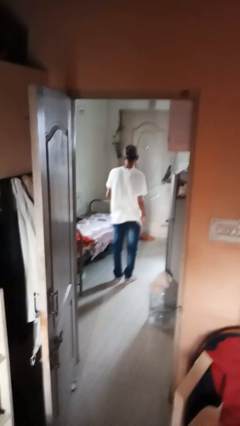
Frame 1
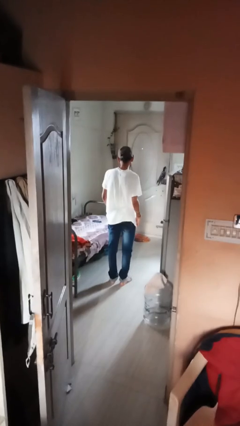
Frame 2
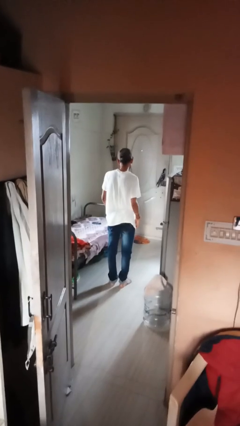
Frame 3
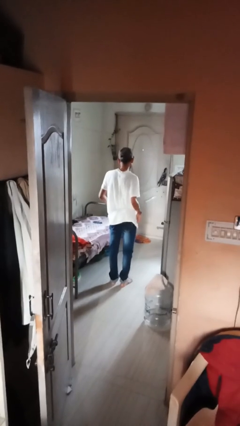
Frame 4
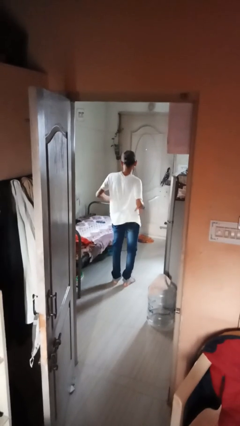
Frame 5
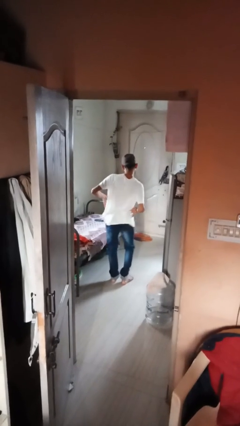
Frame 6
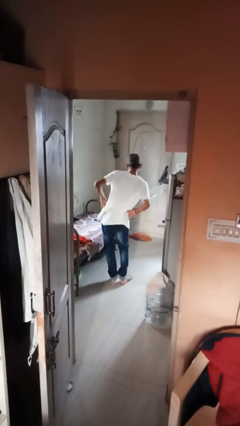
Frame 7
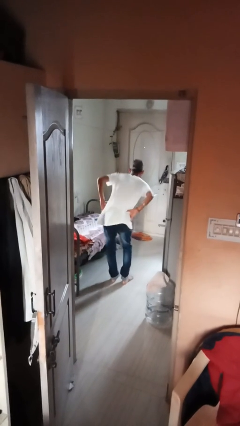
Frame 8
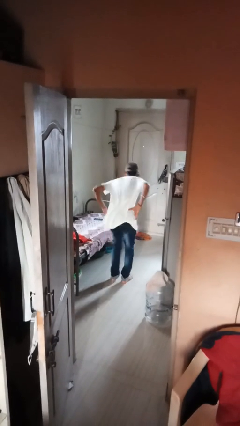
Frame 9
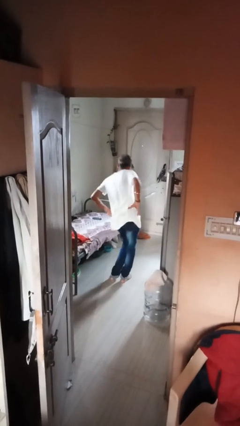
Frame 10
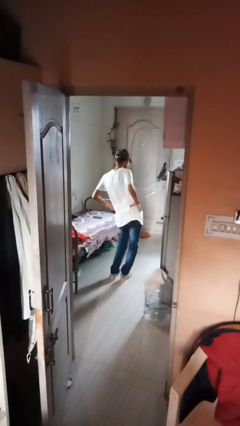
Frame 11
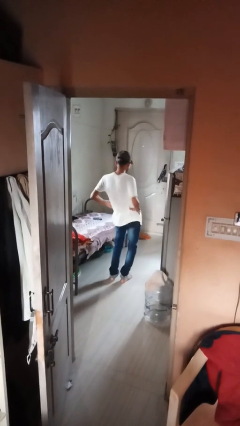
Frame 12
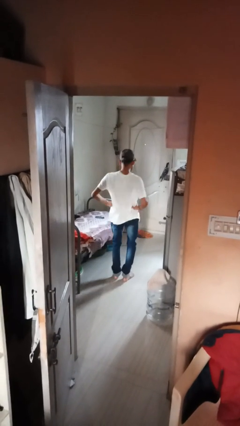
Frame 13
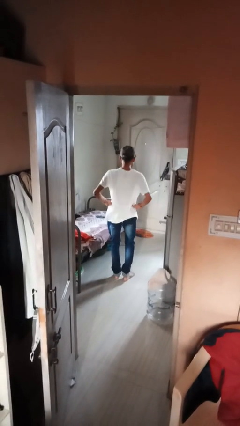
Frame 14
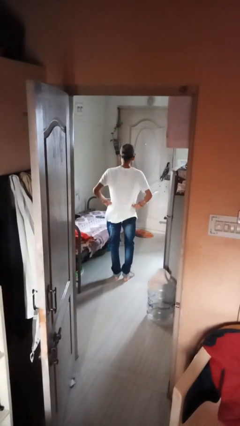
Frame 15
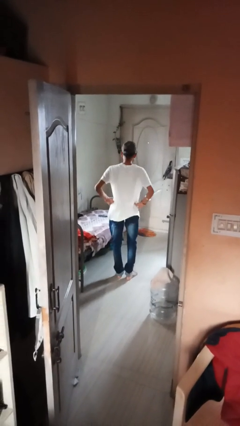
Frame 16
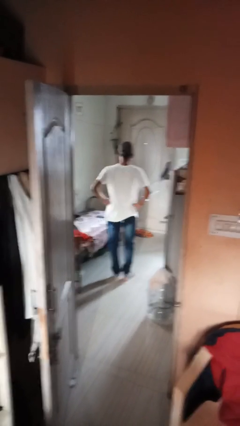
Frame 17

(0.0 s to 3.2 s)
person wiggles hips

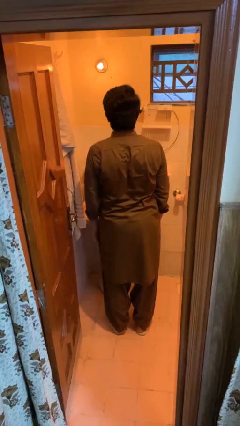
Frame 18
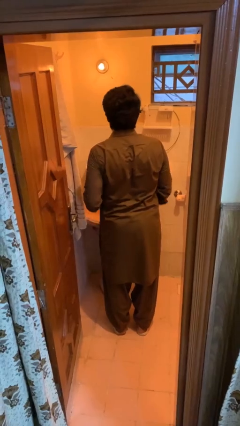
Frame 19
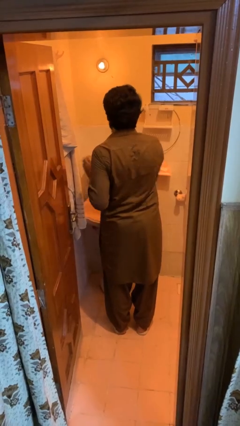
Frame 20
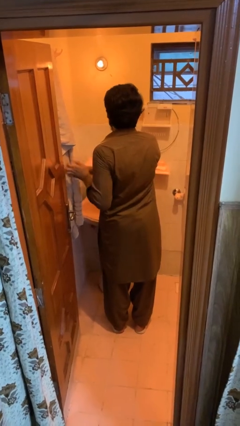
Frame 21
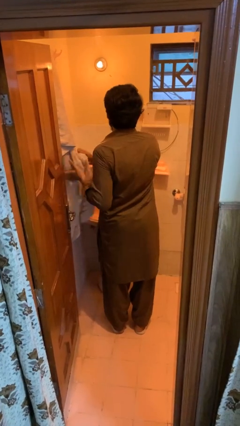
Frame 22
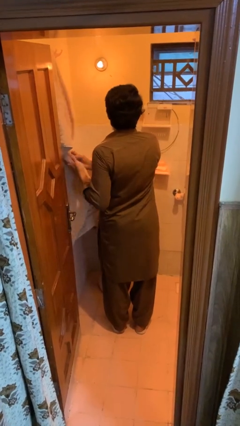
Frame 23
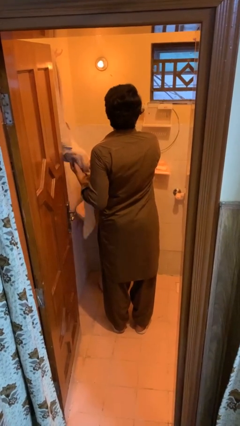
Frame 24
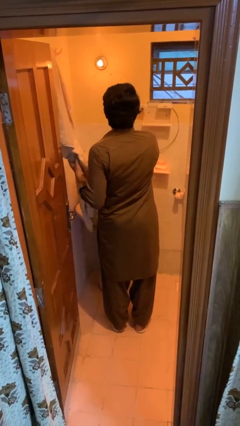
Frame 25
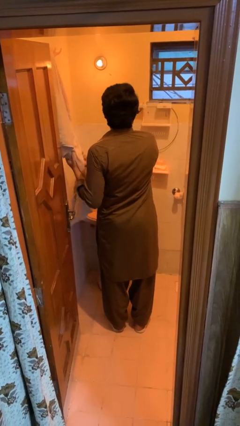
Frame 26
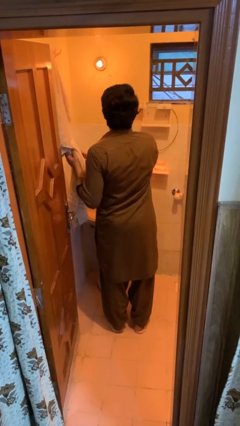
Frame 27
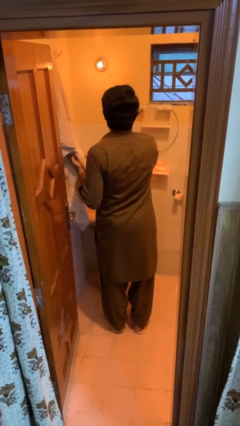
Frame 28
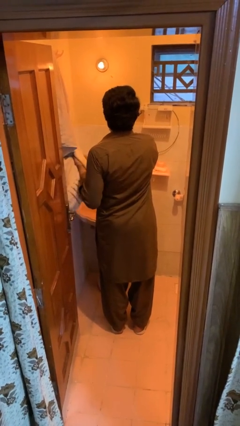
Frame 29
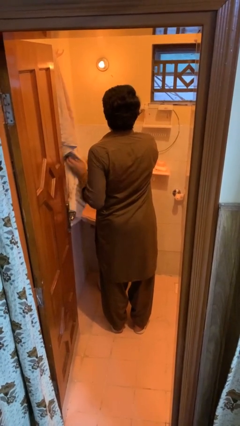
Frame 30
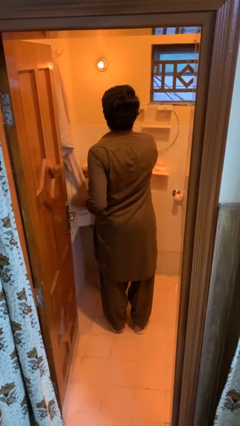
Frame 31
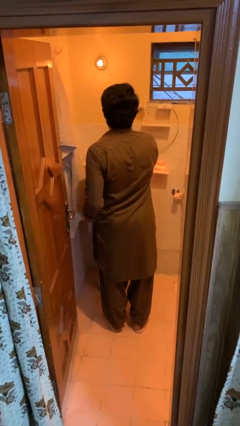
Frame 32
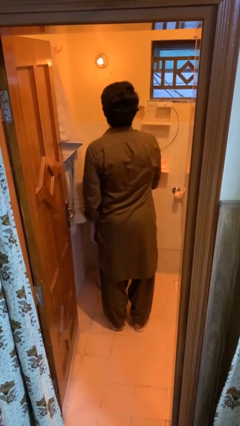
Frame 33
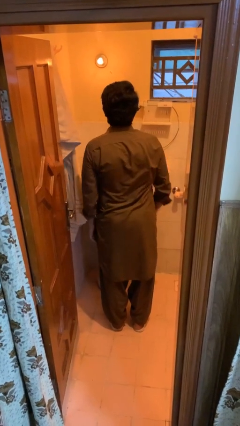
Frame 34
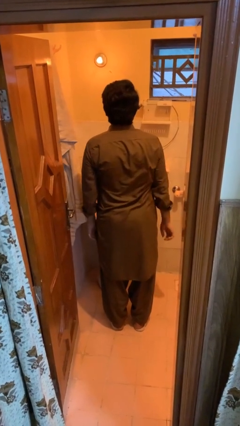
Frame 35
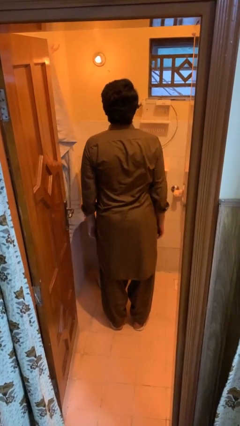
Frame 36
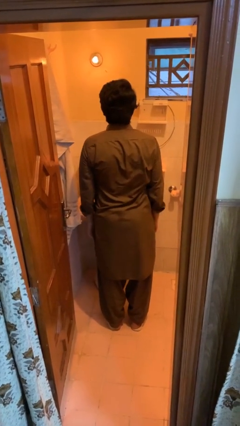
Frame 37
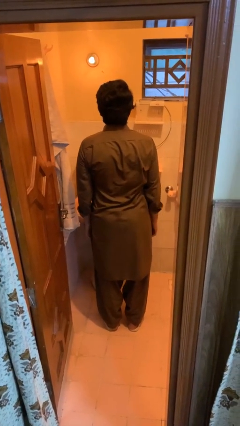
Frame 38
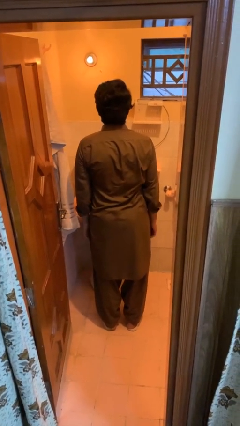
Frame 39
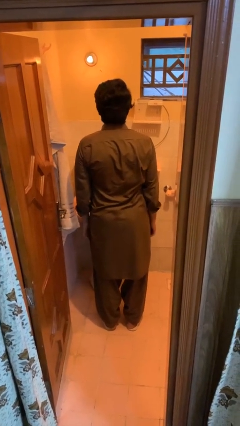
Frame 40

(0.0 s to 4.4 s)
person dries hands with towel

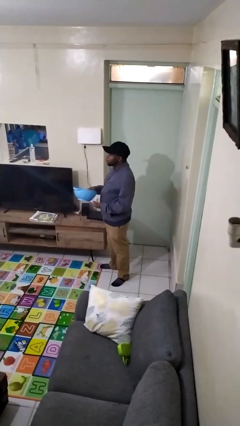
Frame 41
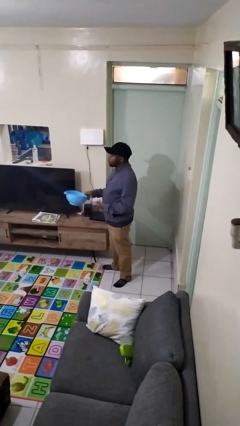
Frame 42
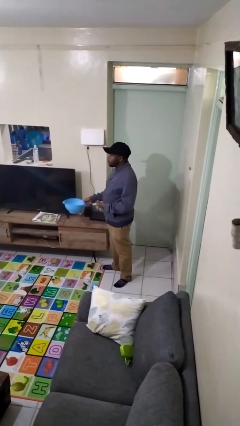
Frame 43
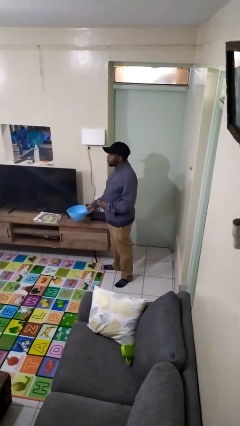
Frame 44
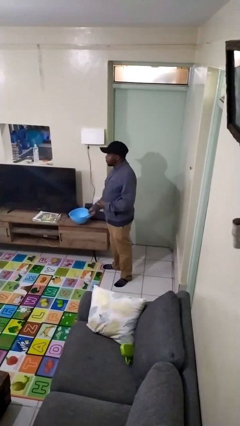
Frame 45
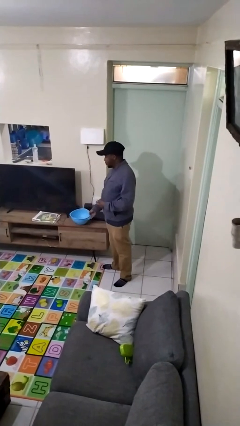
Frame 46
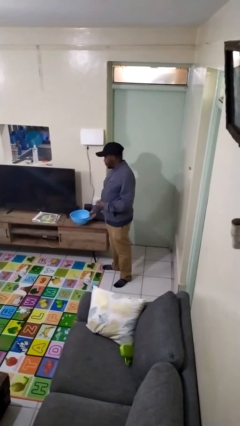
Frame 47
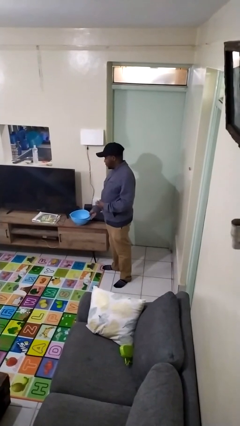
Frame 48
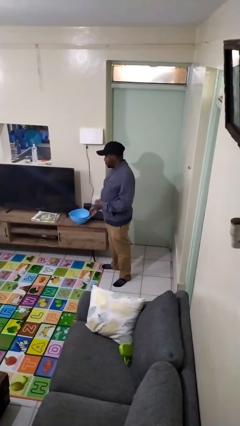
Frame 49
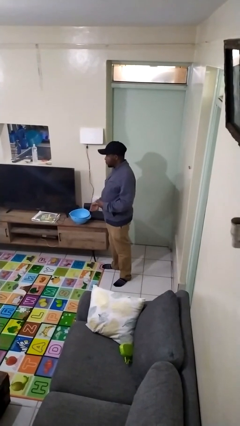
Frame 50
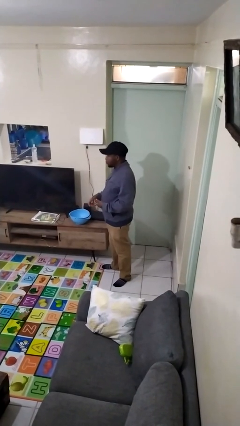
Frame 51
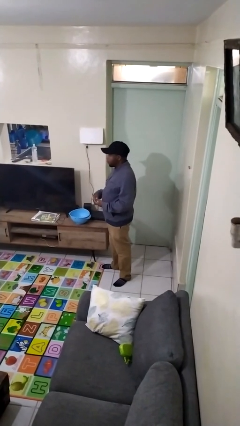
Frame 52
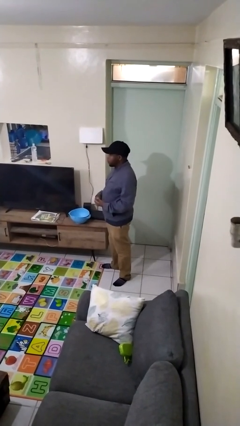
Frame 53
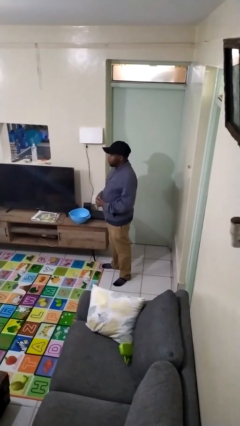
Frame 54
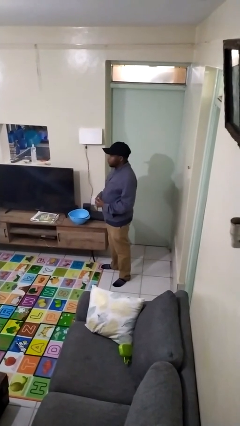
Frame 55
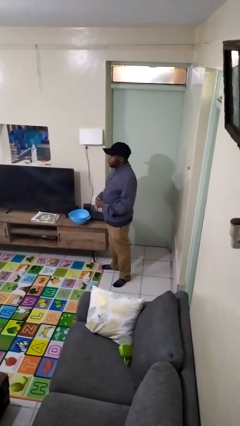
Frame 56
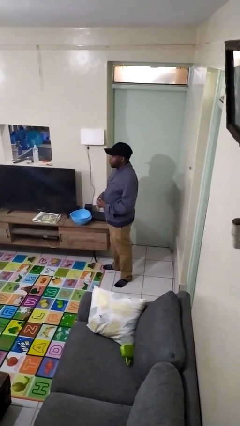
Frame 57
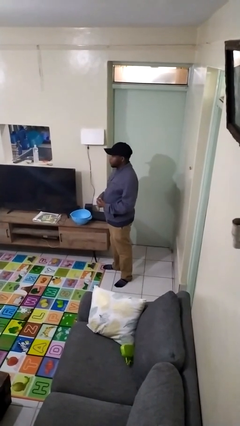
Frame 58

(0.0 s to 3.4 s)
person puts down object on countertop

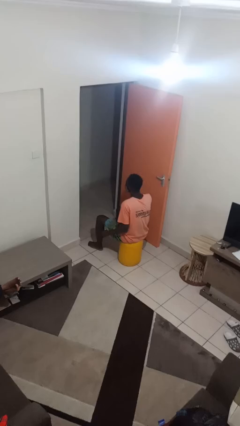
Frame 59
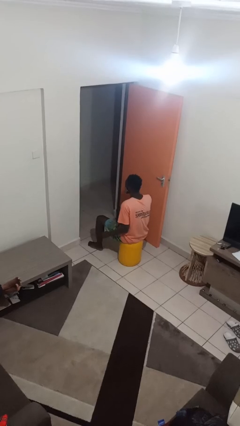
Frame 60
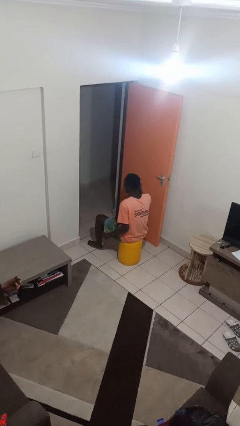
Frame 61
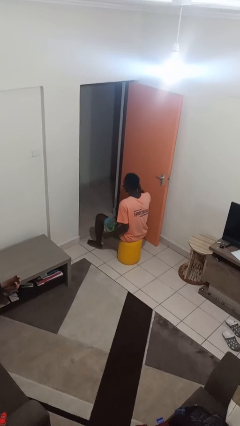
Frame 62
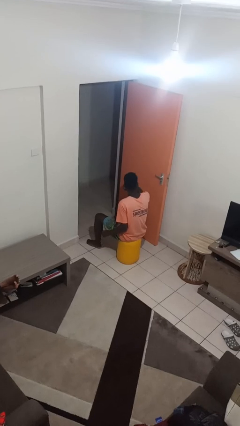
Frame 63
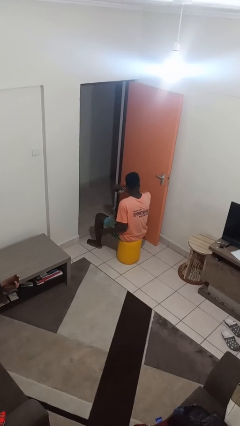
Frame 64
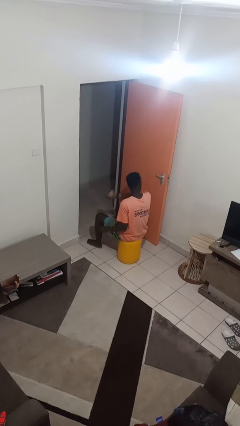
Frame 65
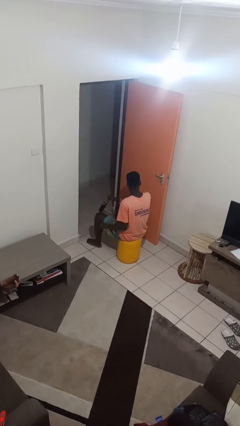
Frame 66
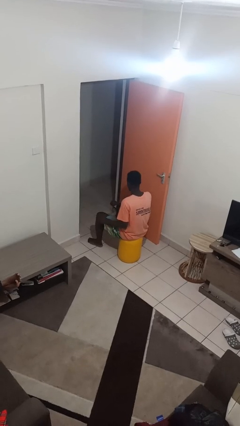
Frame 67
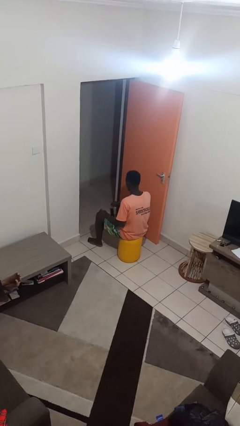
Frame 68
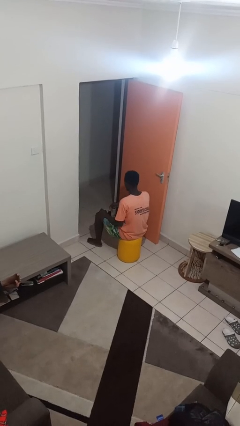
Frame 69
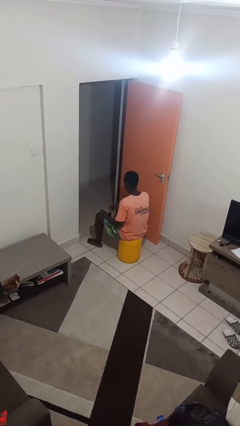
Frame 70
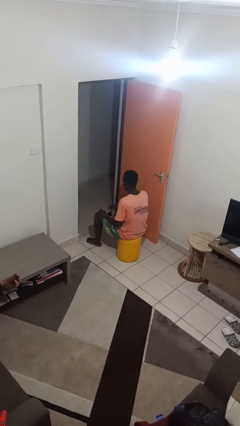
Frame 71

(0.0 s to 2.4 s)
person takes off facemask

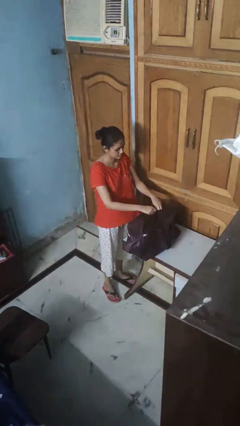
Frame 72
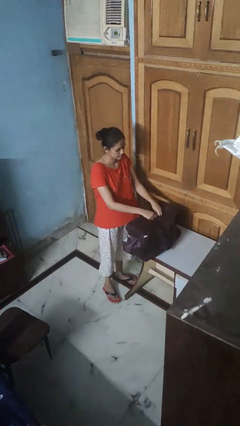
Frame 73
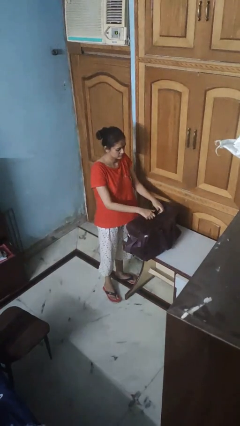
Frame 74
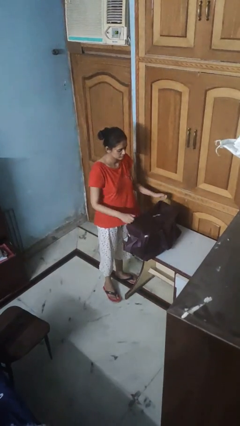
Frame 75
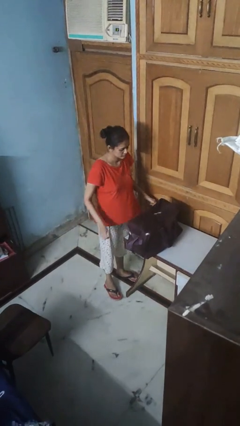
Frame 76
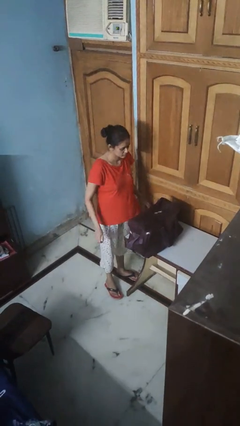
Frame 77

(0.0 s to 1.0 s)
person closes suitcase

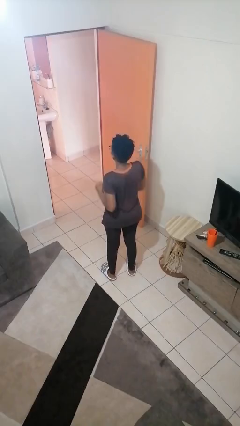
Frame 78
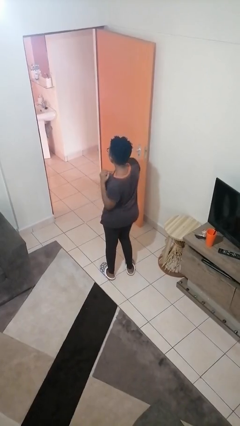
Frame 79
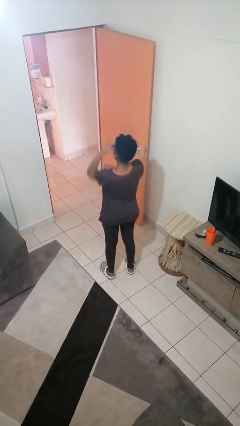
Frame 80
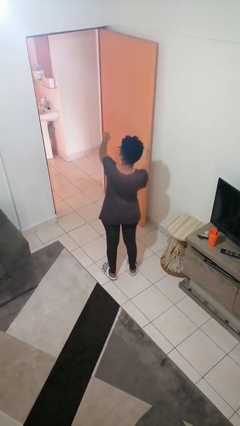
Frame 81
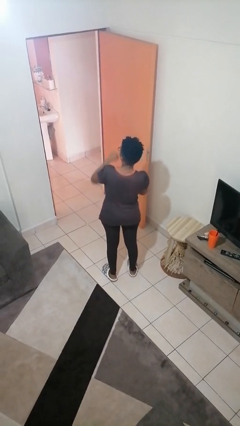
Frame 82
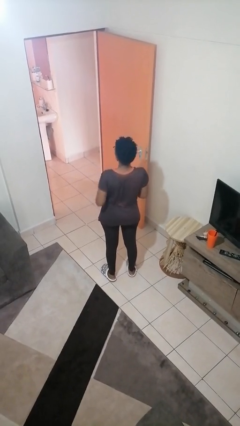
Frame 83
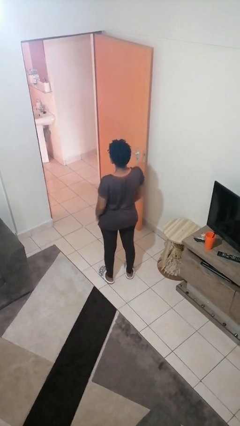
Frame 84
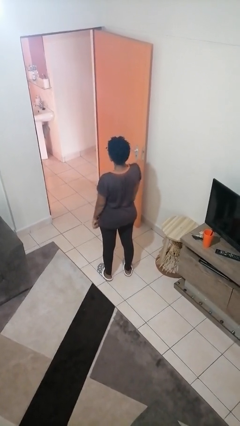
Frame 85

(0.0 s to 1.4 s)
person punches

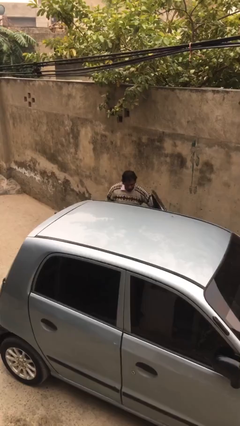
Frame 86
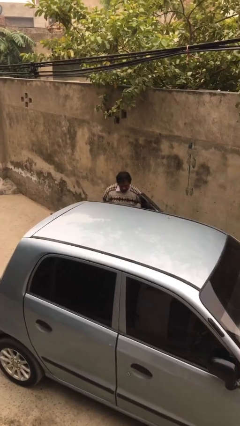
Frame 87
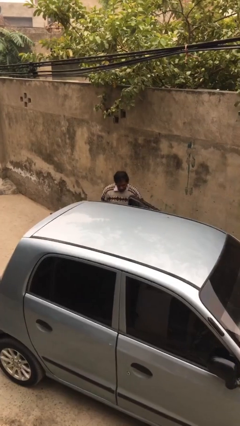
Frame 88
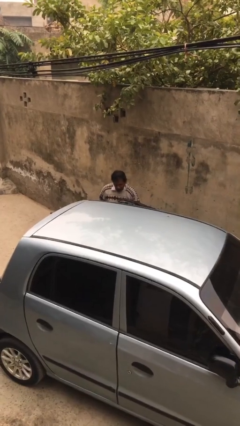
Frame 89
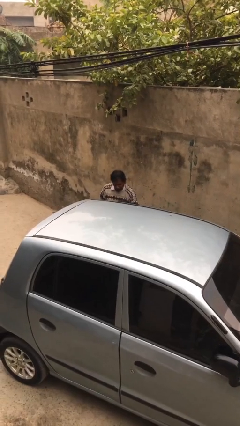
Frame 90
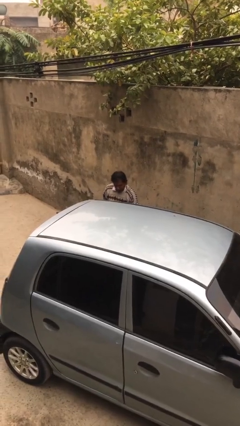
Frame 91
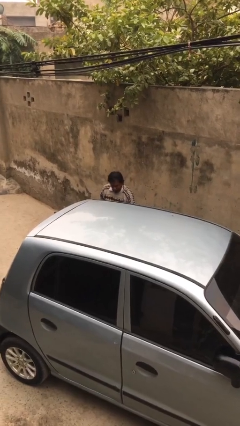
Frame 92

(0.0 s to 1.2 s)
person closes car door
